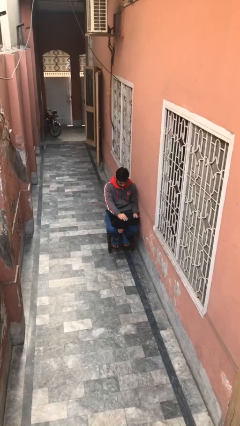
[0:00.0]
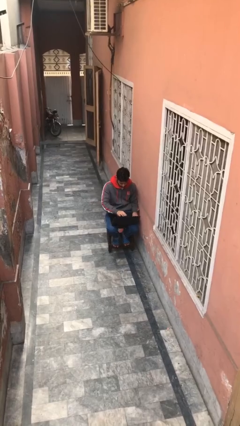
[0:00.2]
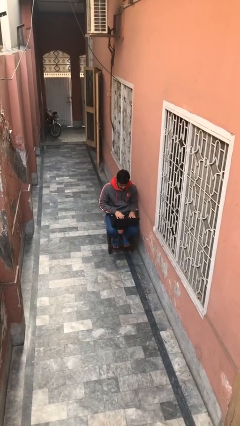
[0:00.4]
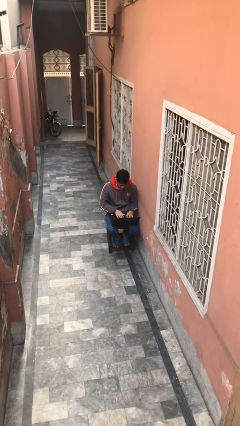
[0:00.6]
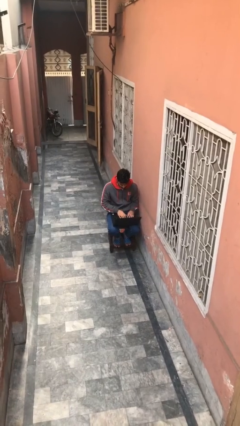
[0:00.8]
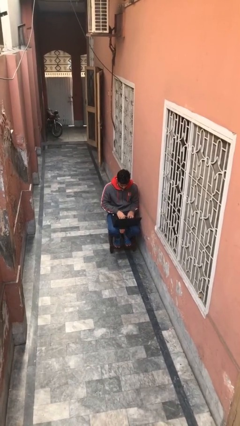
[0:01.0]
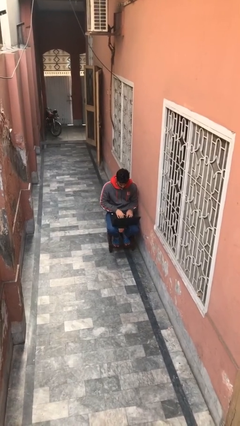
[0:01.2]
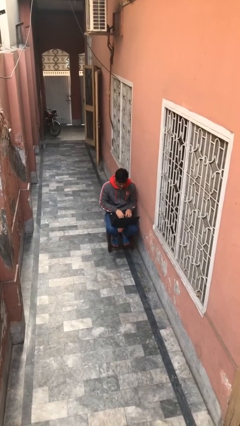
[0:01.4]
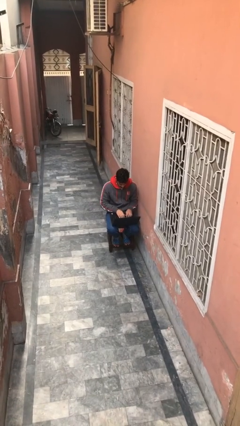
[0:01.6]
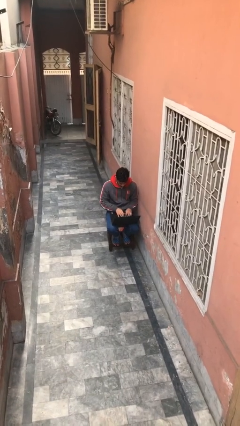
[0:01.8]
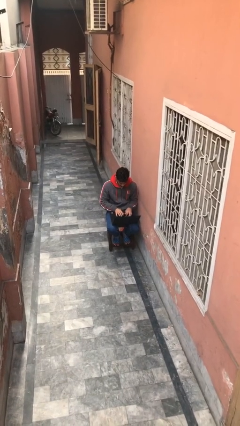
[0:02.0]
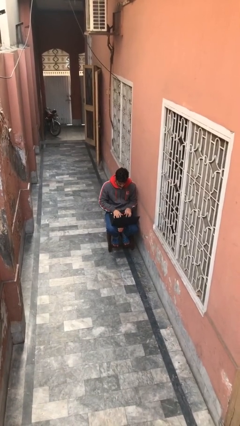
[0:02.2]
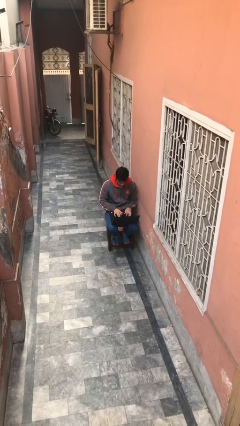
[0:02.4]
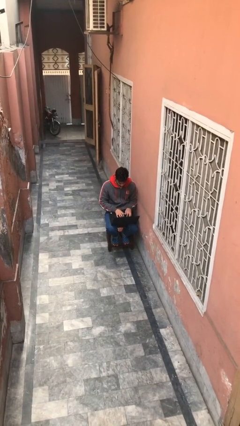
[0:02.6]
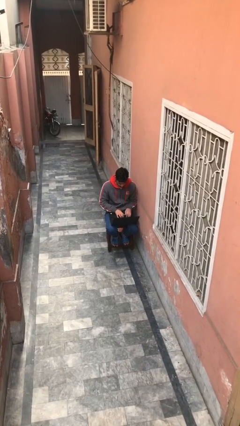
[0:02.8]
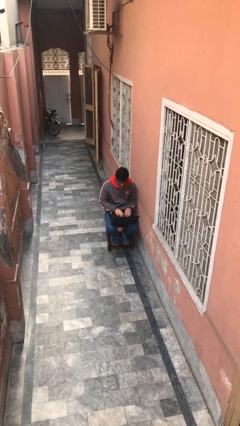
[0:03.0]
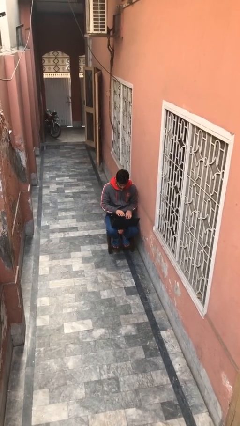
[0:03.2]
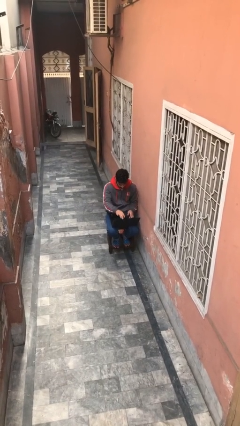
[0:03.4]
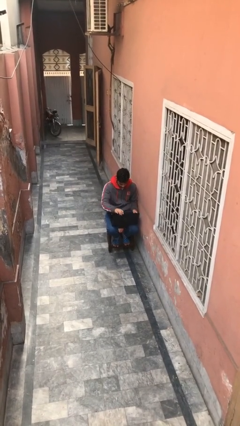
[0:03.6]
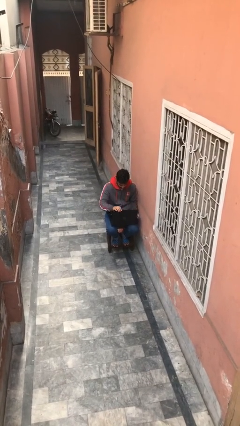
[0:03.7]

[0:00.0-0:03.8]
person interacts with laptop

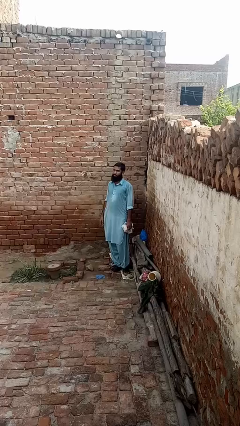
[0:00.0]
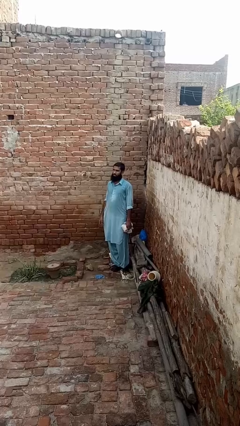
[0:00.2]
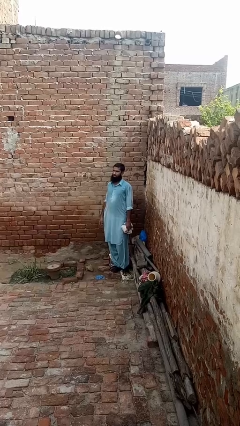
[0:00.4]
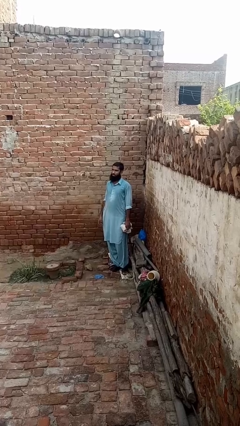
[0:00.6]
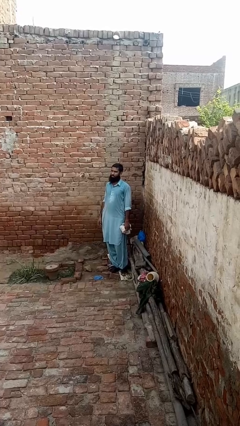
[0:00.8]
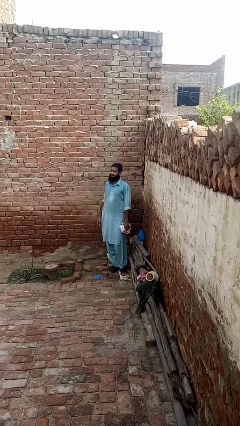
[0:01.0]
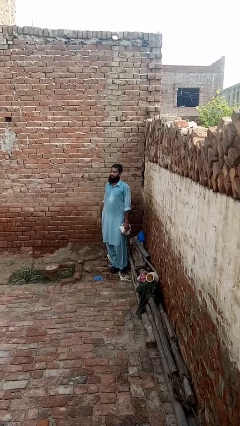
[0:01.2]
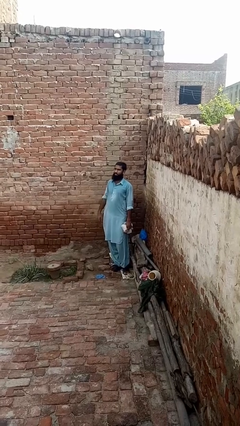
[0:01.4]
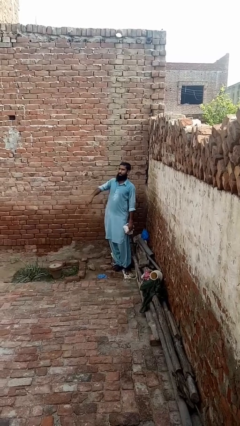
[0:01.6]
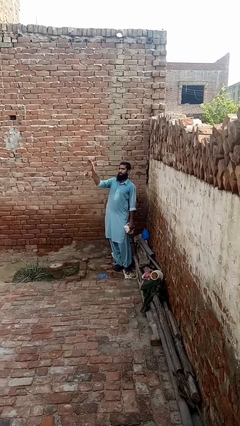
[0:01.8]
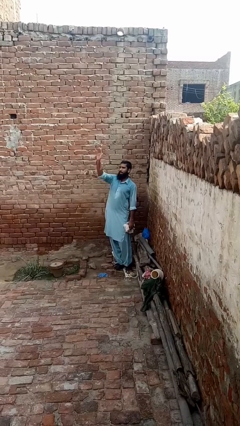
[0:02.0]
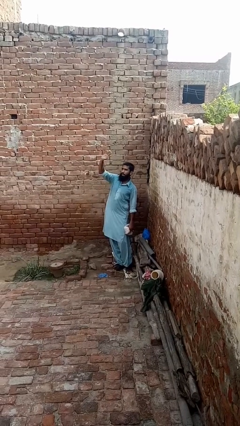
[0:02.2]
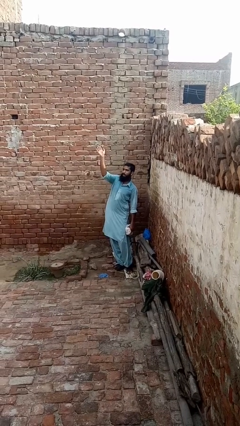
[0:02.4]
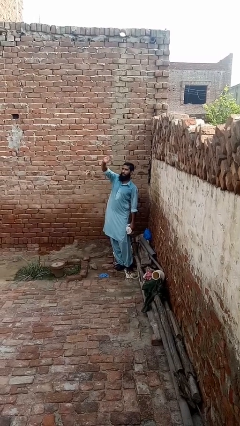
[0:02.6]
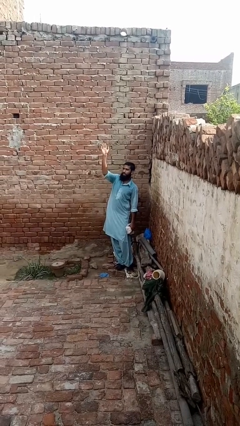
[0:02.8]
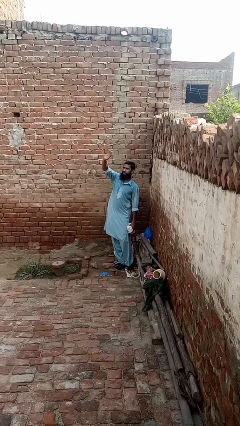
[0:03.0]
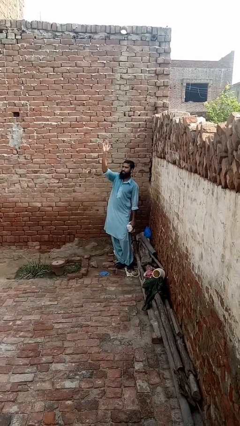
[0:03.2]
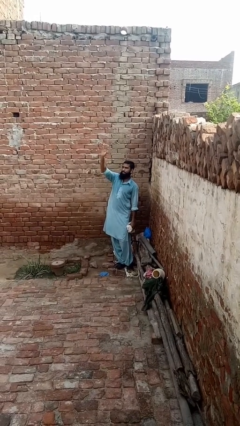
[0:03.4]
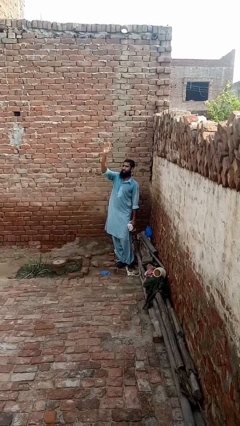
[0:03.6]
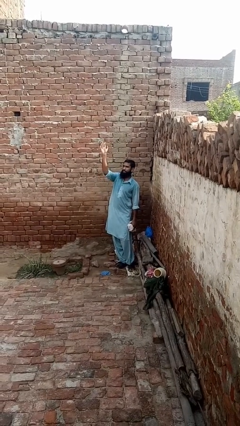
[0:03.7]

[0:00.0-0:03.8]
person waves at person

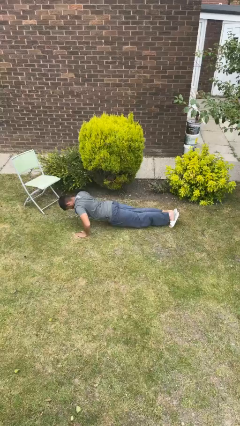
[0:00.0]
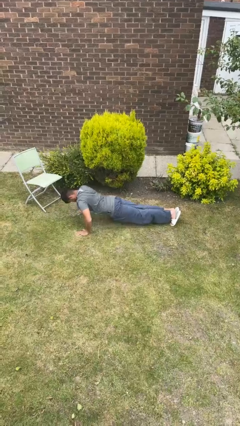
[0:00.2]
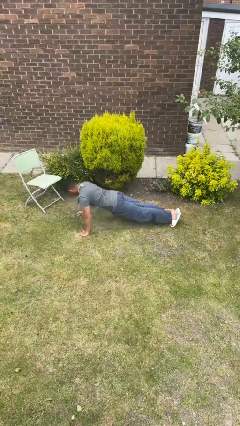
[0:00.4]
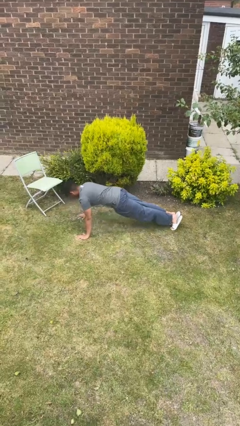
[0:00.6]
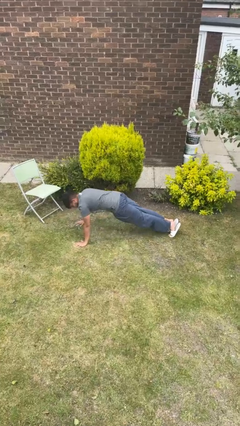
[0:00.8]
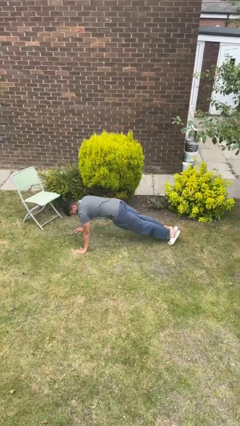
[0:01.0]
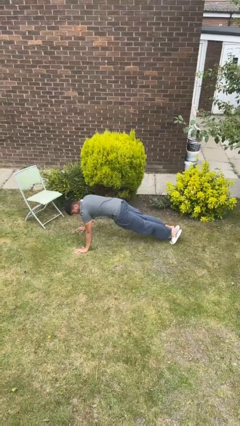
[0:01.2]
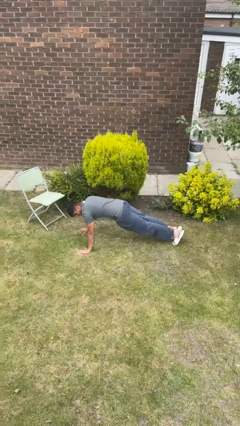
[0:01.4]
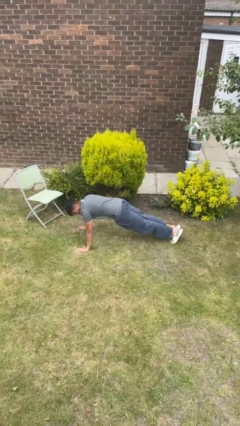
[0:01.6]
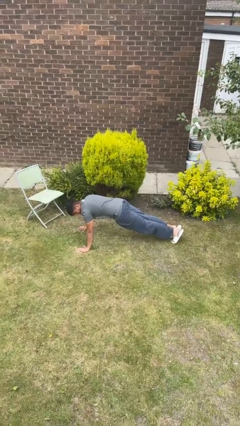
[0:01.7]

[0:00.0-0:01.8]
person exercises with pushup

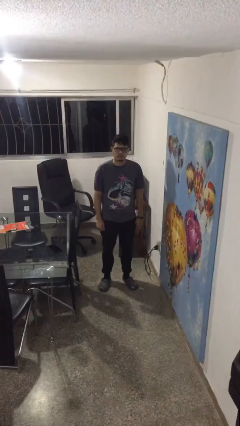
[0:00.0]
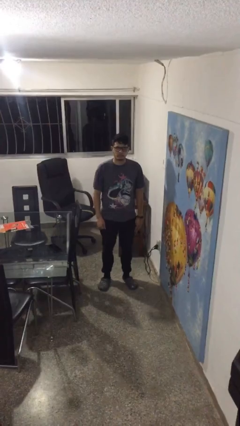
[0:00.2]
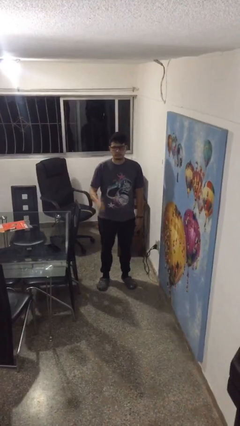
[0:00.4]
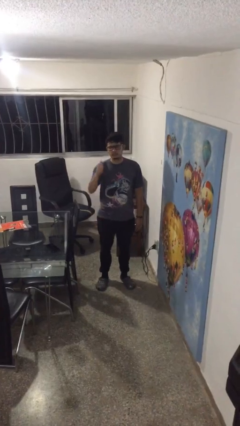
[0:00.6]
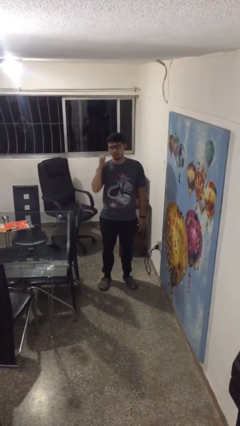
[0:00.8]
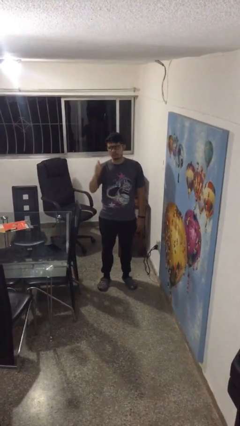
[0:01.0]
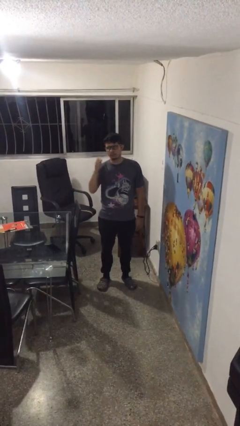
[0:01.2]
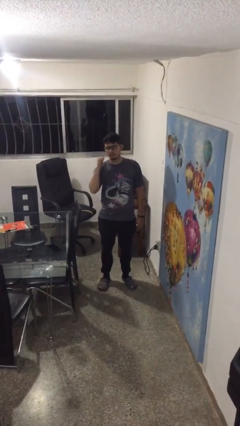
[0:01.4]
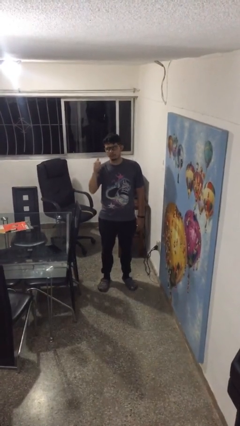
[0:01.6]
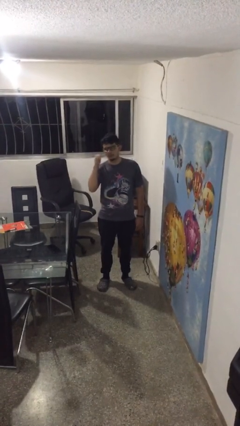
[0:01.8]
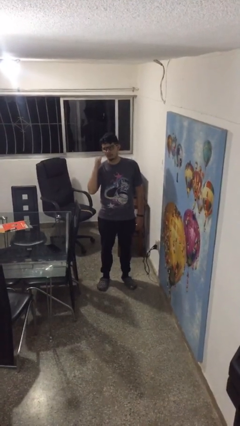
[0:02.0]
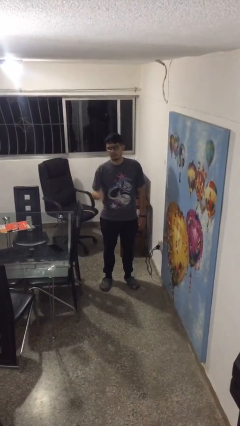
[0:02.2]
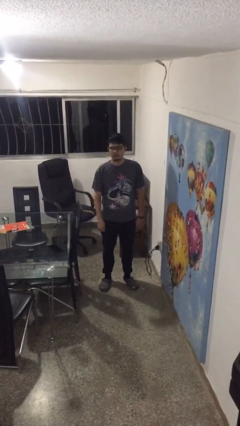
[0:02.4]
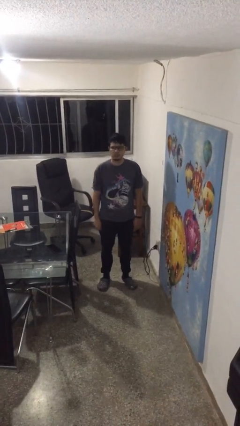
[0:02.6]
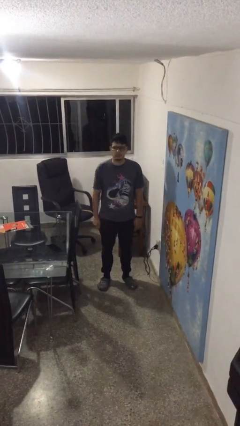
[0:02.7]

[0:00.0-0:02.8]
person gestures behind me

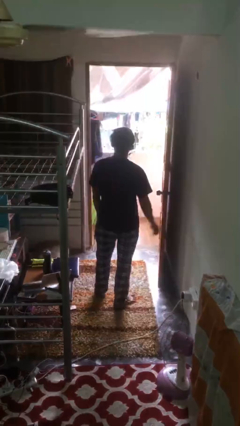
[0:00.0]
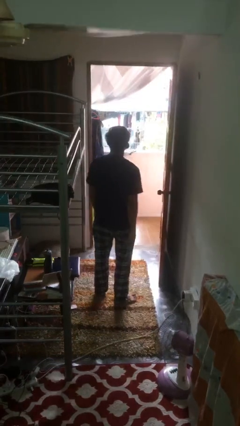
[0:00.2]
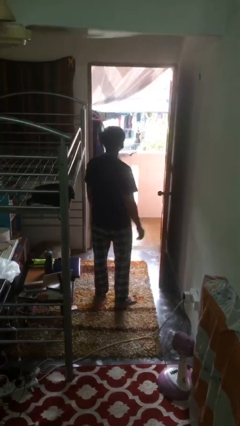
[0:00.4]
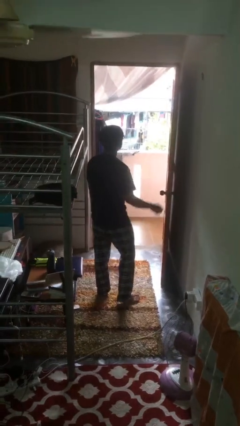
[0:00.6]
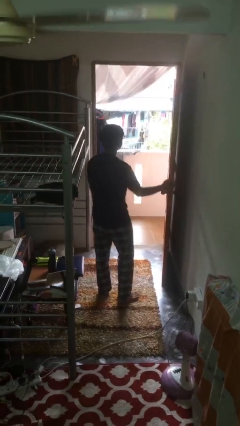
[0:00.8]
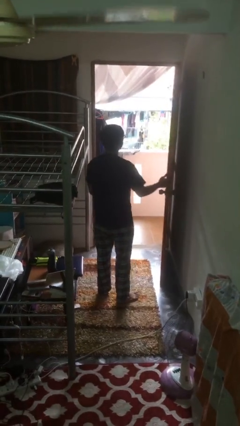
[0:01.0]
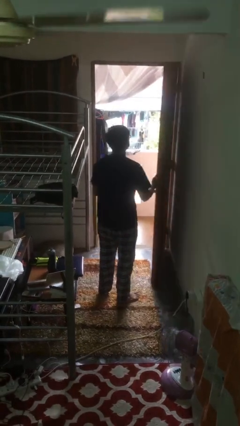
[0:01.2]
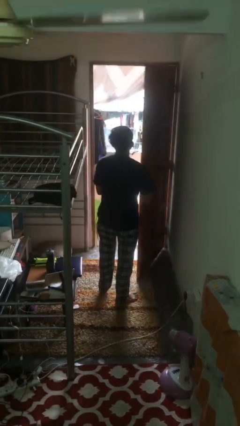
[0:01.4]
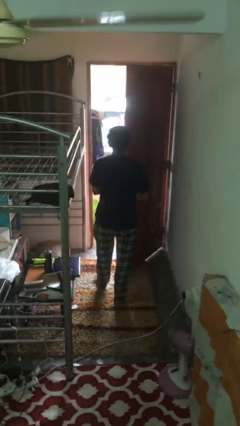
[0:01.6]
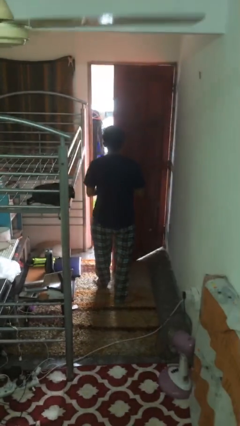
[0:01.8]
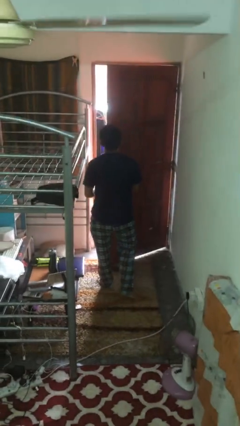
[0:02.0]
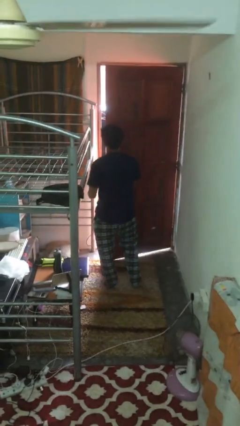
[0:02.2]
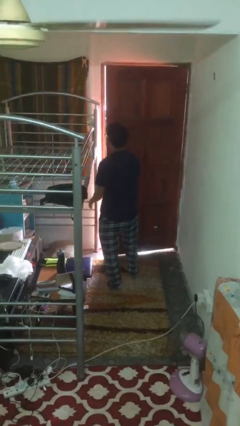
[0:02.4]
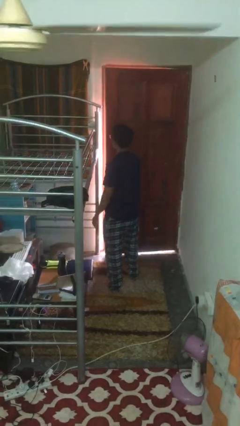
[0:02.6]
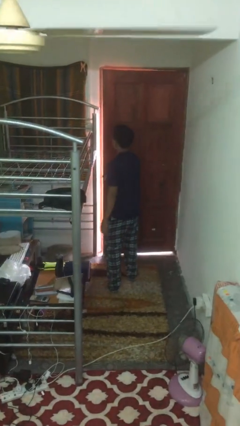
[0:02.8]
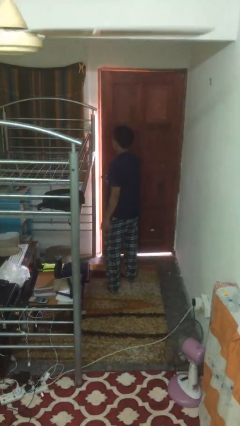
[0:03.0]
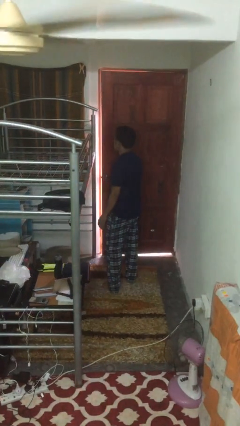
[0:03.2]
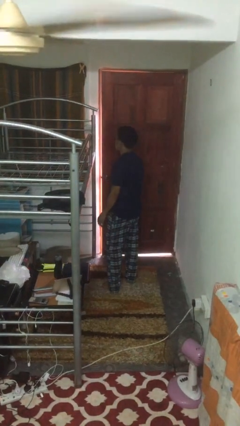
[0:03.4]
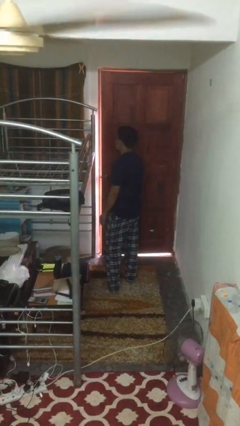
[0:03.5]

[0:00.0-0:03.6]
person closes facility door

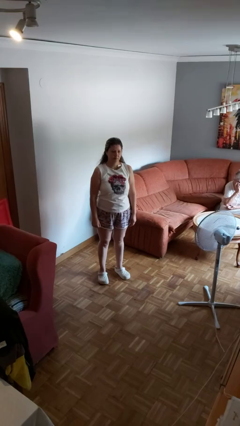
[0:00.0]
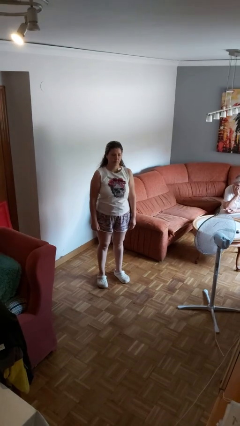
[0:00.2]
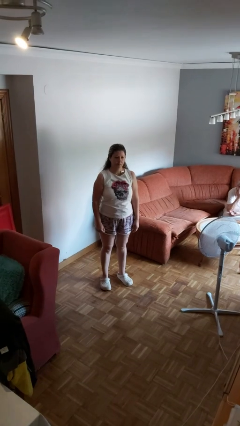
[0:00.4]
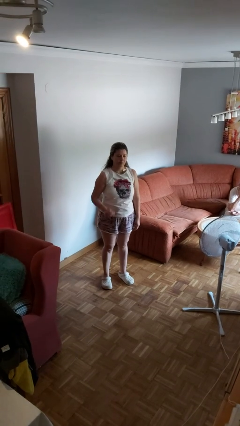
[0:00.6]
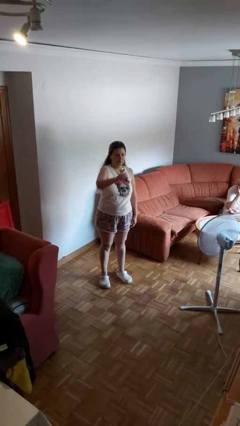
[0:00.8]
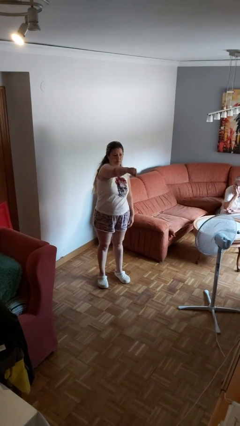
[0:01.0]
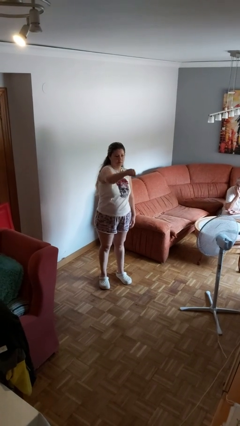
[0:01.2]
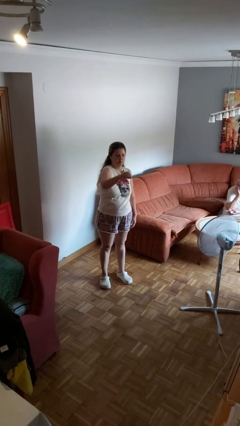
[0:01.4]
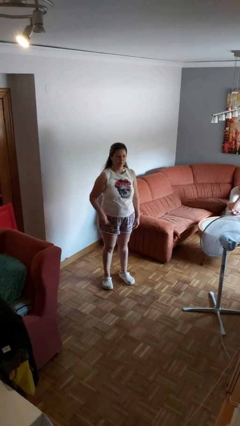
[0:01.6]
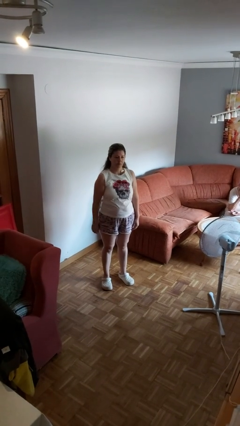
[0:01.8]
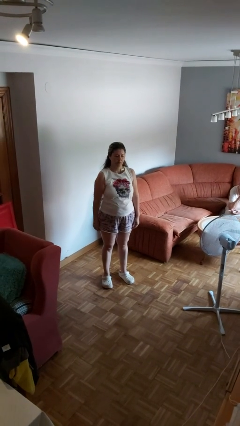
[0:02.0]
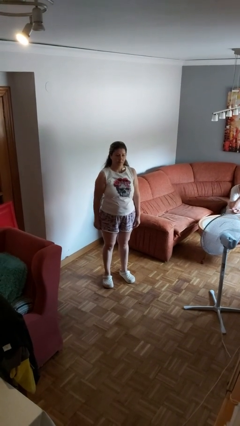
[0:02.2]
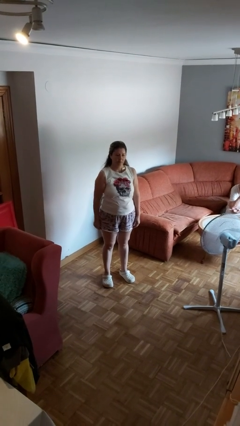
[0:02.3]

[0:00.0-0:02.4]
person punches
